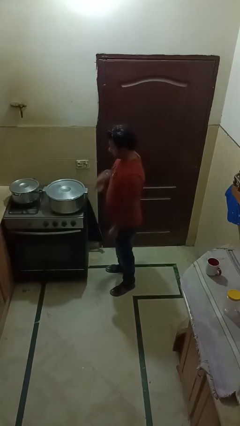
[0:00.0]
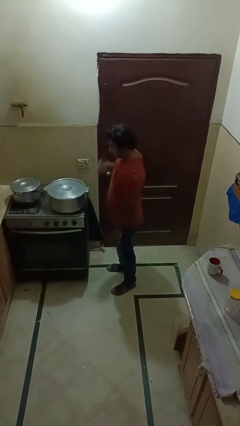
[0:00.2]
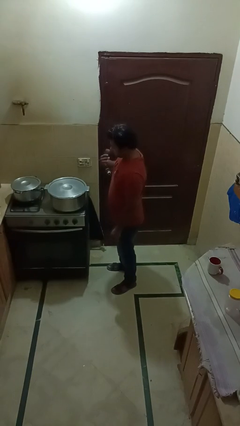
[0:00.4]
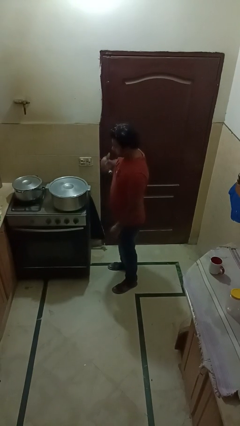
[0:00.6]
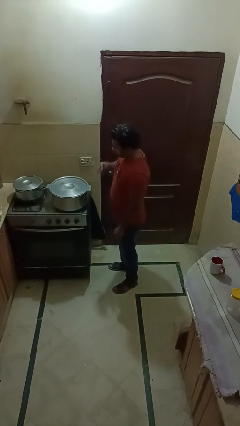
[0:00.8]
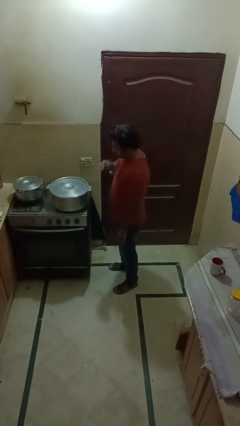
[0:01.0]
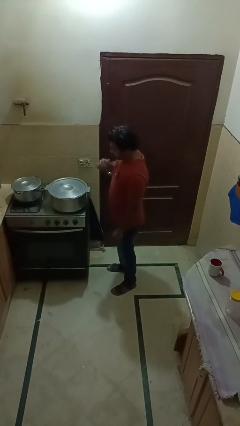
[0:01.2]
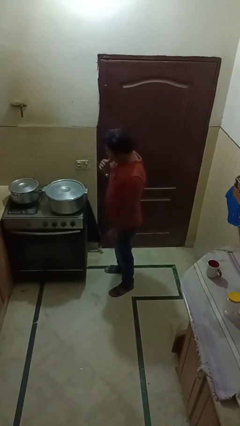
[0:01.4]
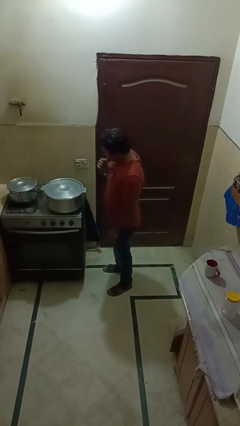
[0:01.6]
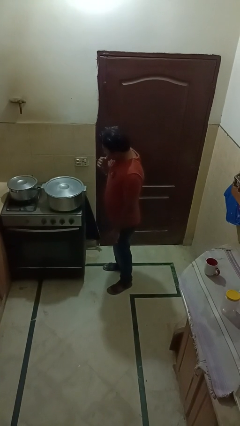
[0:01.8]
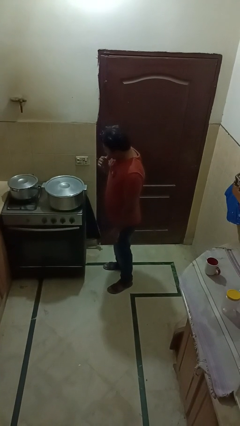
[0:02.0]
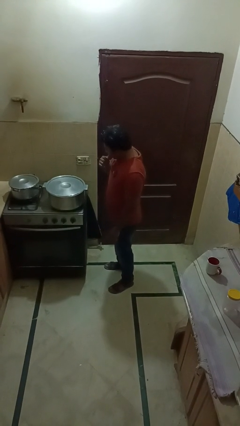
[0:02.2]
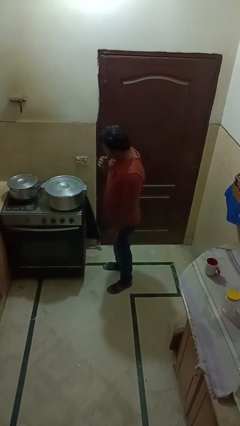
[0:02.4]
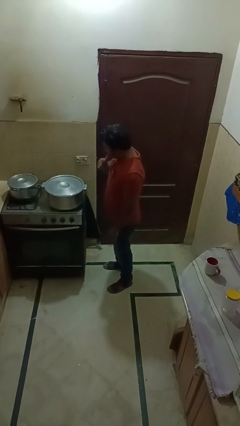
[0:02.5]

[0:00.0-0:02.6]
person burns hand

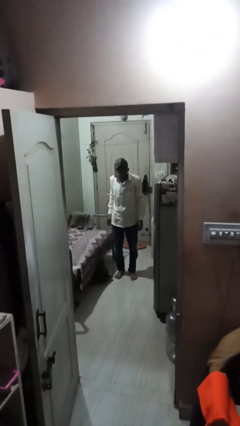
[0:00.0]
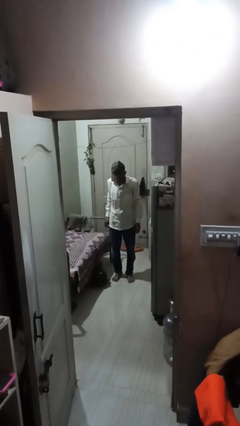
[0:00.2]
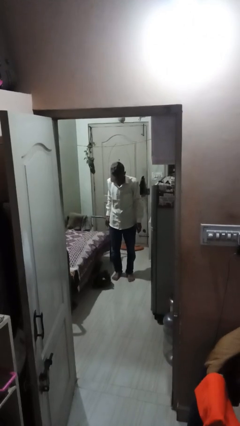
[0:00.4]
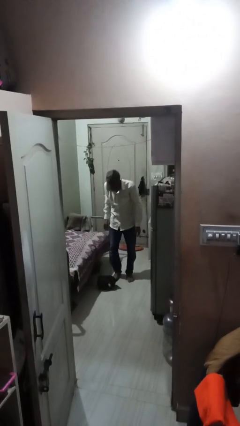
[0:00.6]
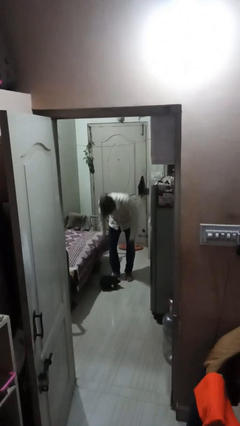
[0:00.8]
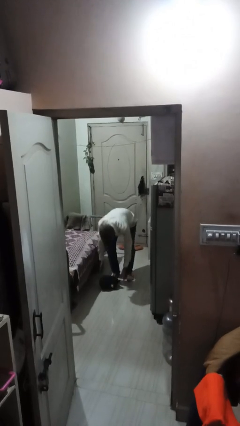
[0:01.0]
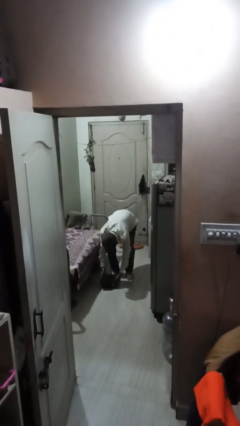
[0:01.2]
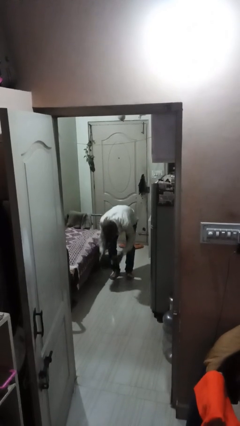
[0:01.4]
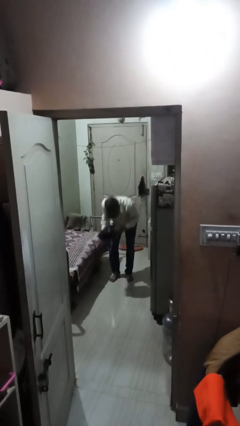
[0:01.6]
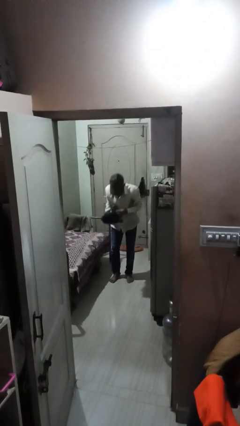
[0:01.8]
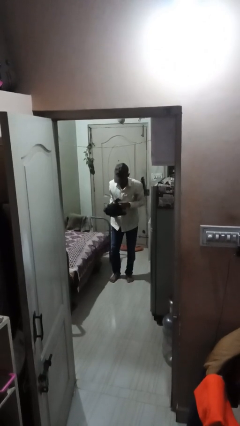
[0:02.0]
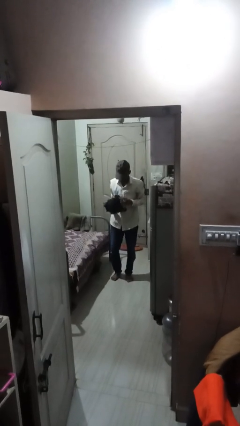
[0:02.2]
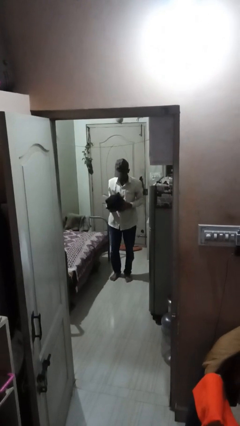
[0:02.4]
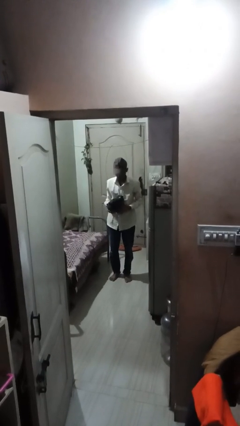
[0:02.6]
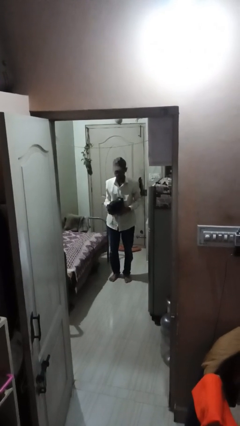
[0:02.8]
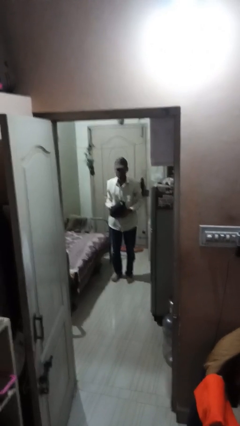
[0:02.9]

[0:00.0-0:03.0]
person picks up object from floor

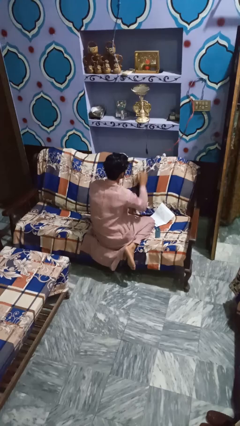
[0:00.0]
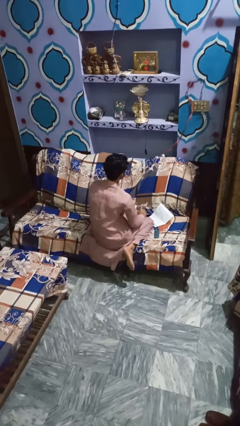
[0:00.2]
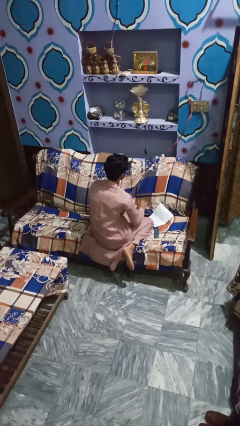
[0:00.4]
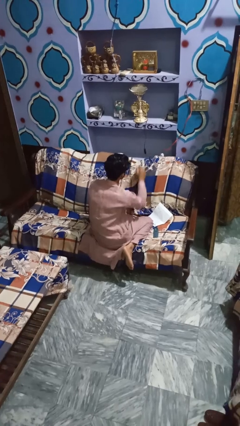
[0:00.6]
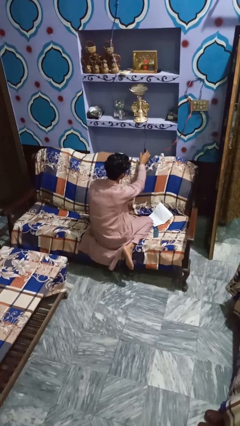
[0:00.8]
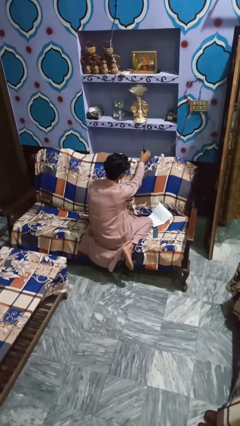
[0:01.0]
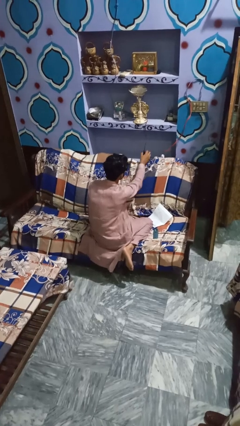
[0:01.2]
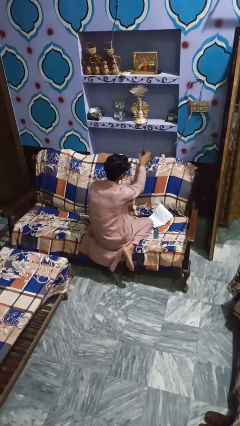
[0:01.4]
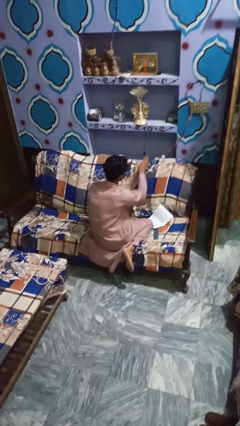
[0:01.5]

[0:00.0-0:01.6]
person turns on lamp

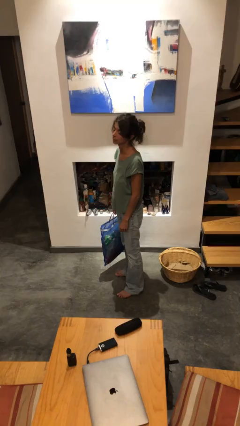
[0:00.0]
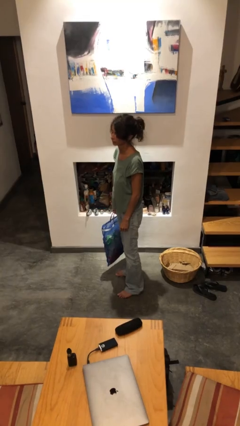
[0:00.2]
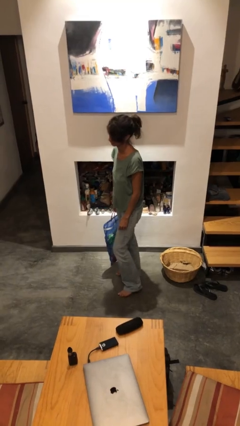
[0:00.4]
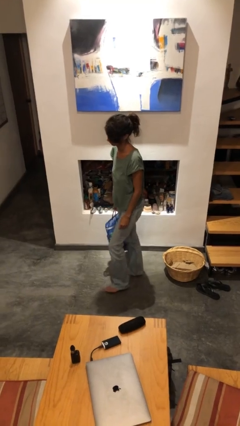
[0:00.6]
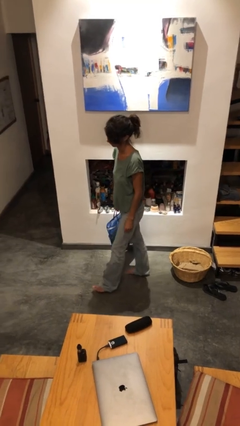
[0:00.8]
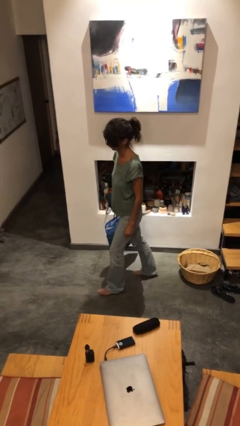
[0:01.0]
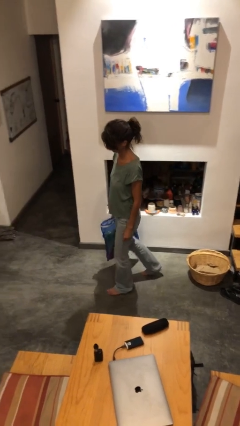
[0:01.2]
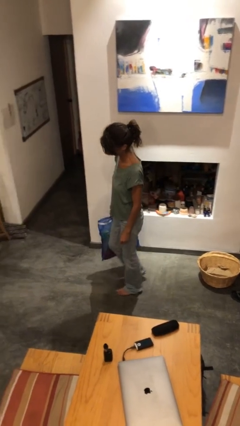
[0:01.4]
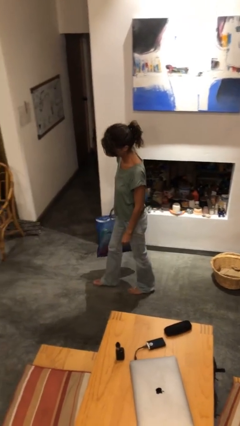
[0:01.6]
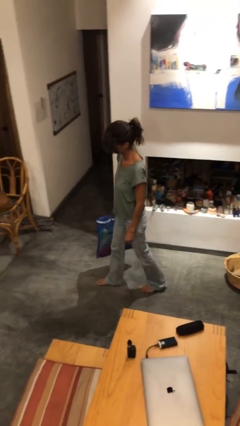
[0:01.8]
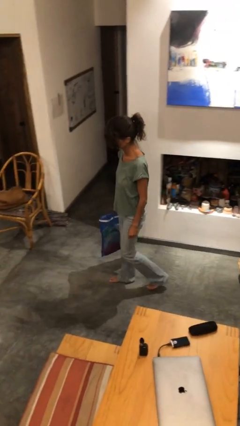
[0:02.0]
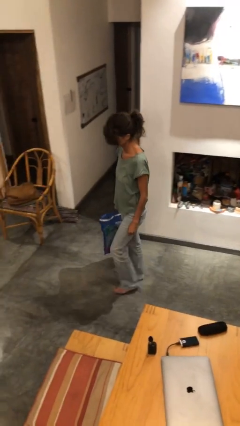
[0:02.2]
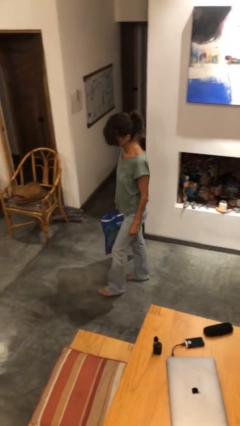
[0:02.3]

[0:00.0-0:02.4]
person carries groceries

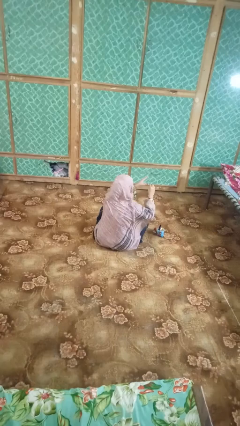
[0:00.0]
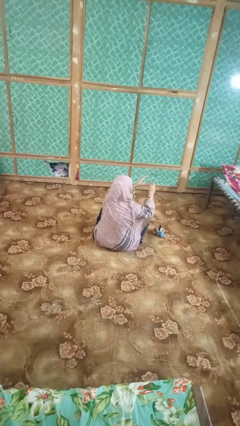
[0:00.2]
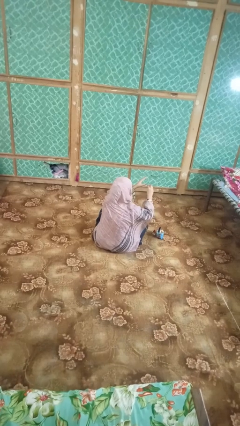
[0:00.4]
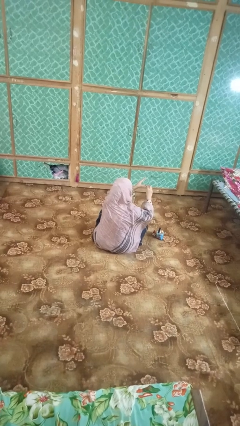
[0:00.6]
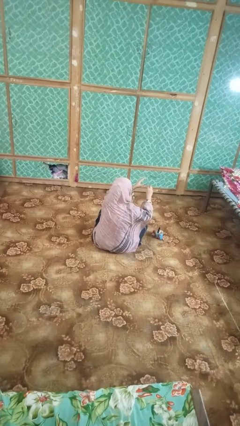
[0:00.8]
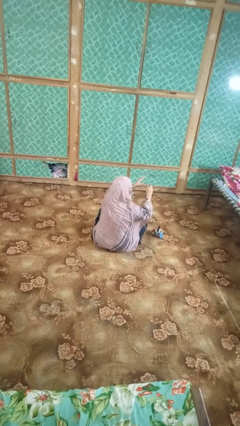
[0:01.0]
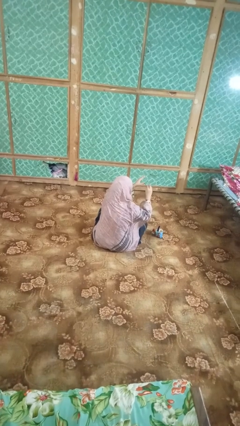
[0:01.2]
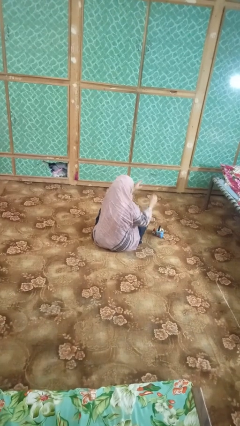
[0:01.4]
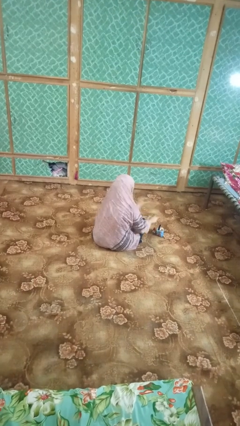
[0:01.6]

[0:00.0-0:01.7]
person paints fingernails

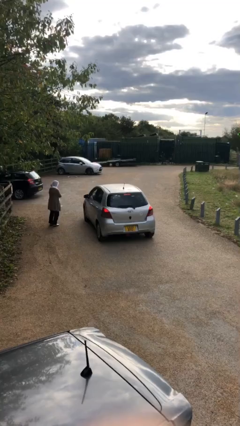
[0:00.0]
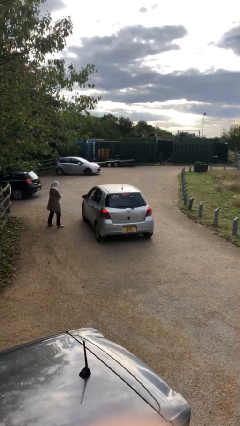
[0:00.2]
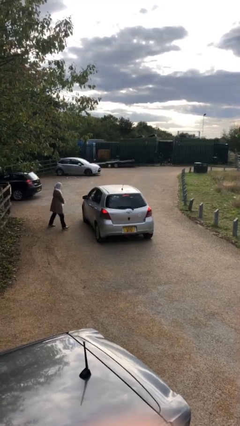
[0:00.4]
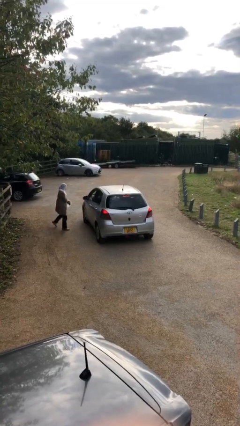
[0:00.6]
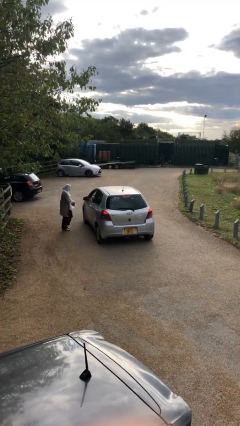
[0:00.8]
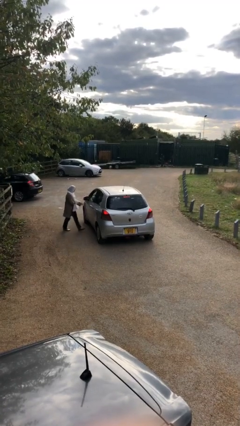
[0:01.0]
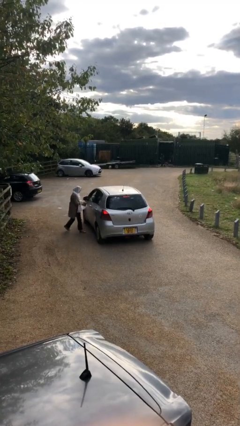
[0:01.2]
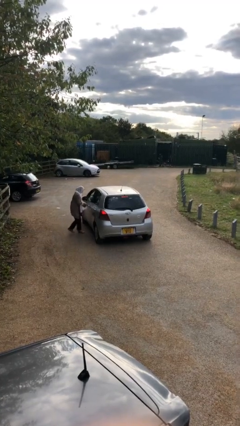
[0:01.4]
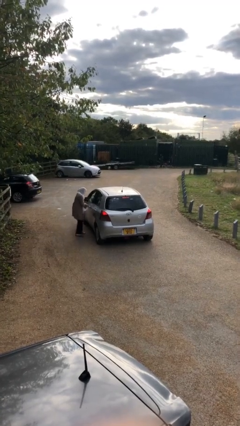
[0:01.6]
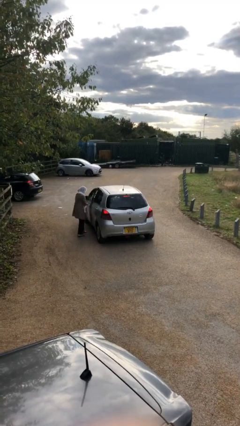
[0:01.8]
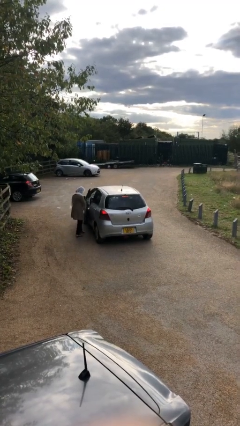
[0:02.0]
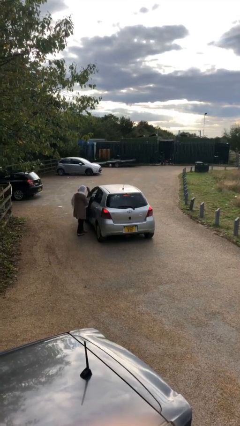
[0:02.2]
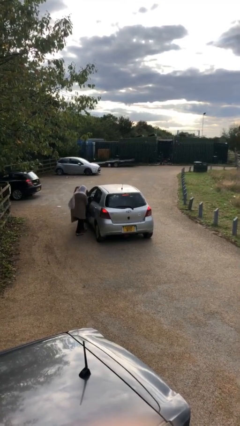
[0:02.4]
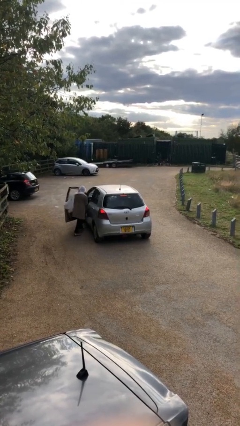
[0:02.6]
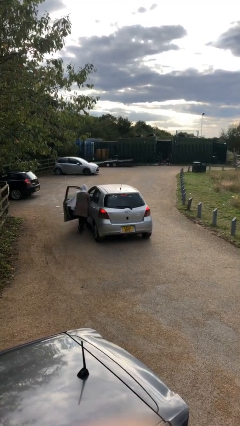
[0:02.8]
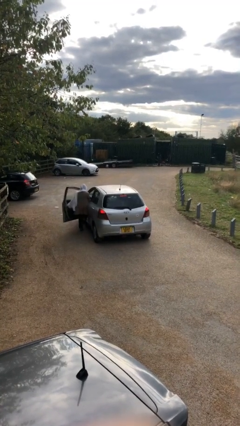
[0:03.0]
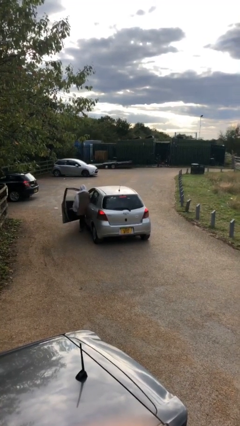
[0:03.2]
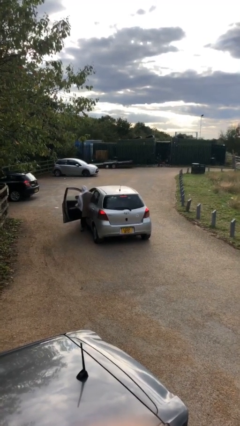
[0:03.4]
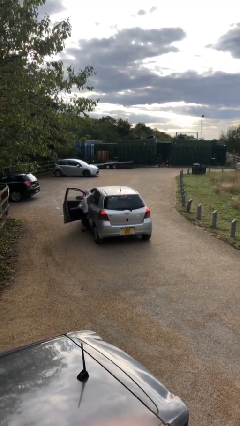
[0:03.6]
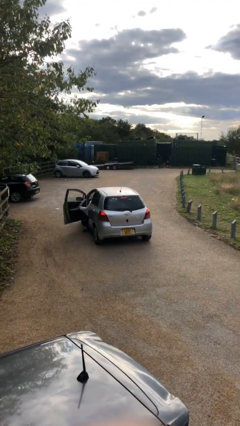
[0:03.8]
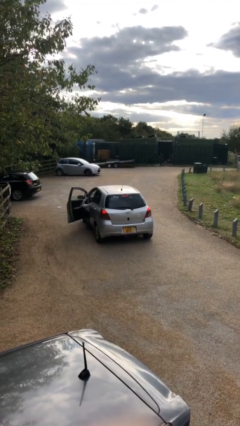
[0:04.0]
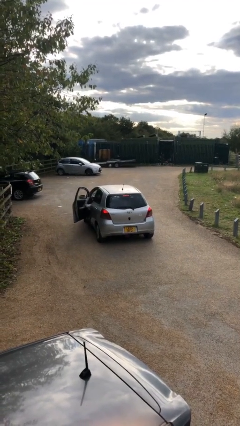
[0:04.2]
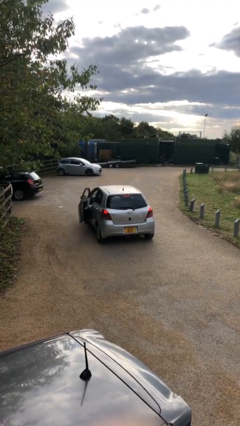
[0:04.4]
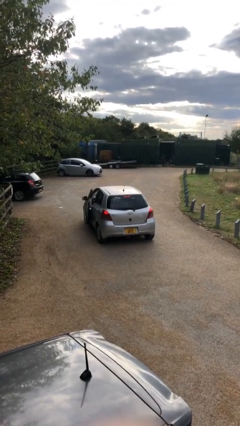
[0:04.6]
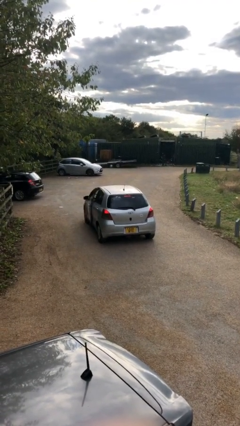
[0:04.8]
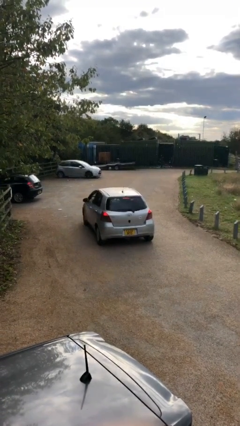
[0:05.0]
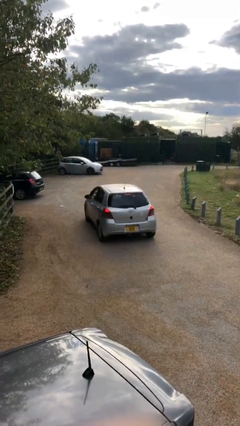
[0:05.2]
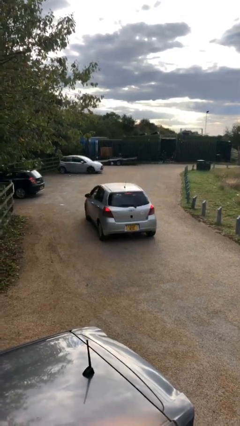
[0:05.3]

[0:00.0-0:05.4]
car picks up person

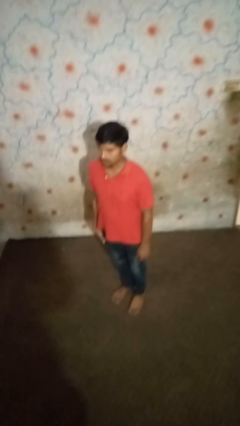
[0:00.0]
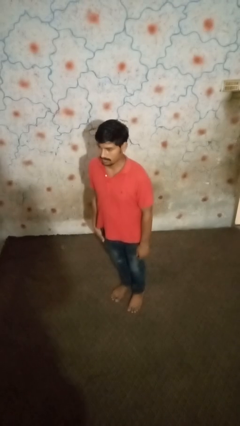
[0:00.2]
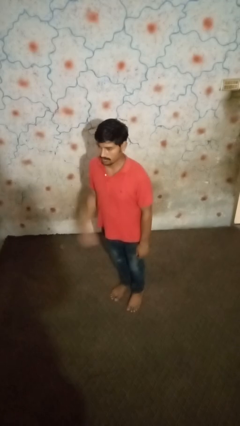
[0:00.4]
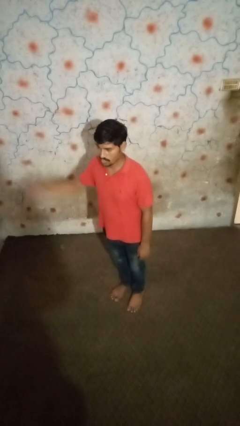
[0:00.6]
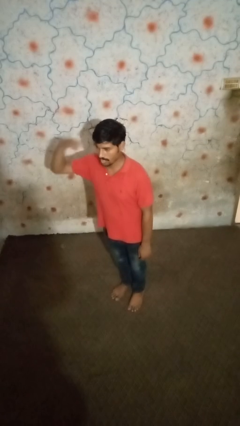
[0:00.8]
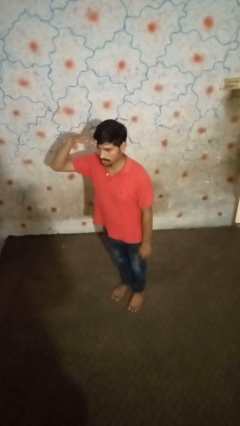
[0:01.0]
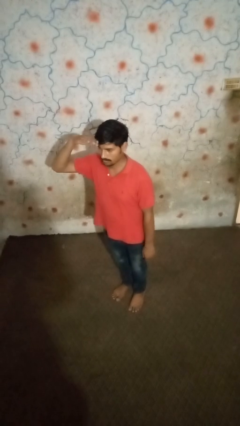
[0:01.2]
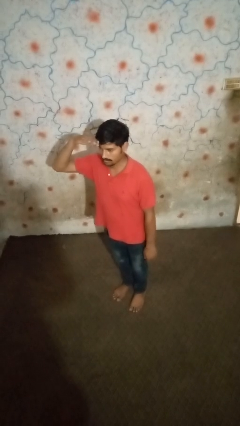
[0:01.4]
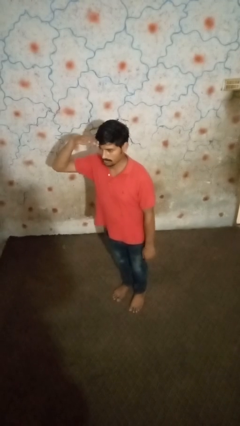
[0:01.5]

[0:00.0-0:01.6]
person salutes
